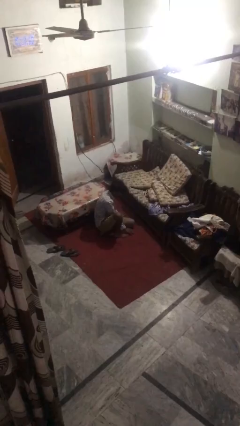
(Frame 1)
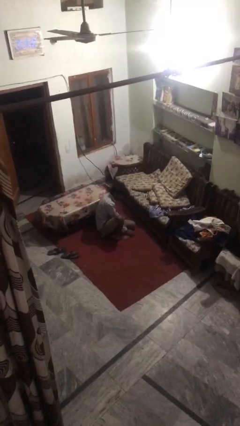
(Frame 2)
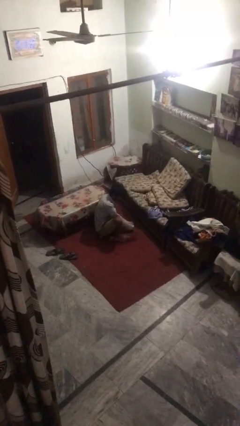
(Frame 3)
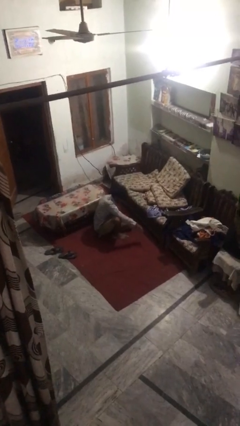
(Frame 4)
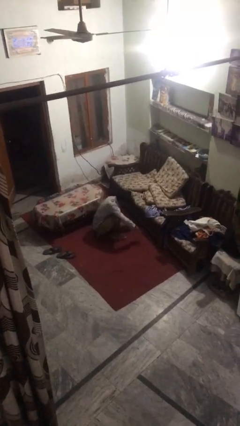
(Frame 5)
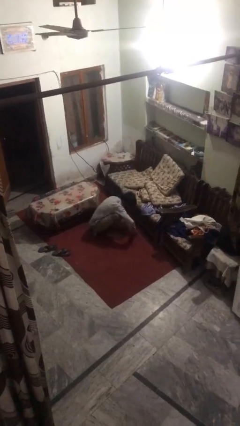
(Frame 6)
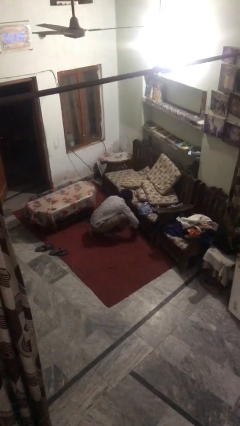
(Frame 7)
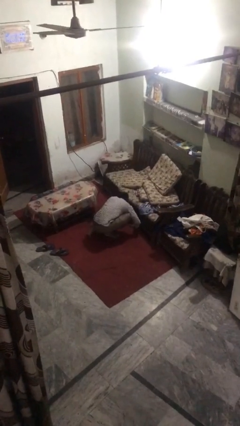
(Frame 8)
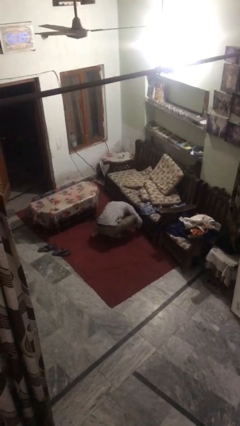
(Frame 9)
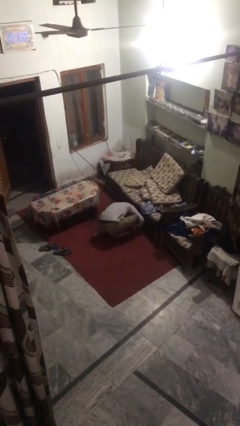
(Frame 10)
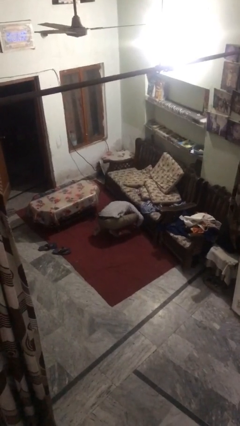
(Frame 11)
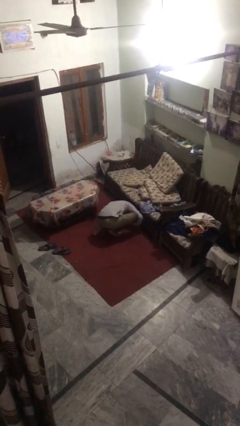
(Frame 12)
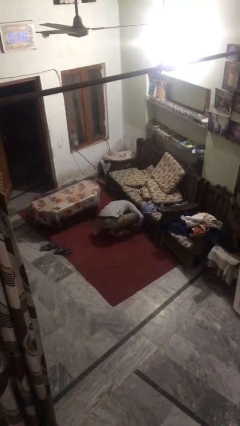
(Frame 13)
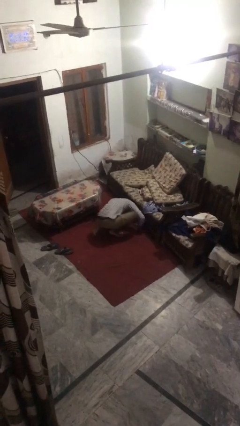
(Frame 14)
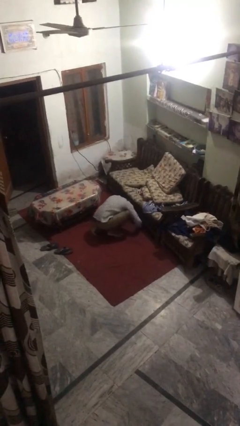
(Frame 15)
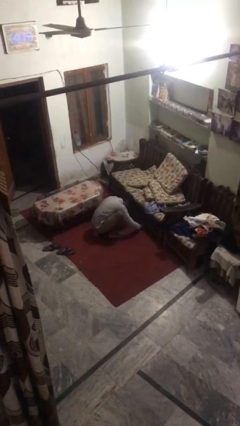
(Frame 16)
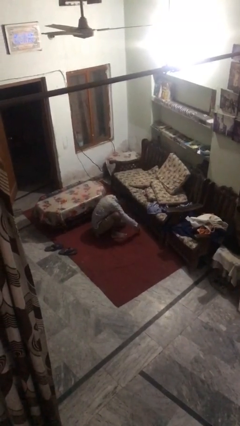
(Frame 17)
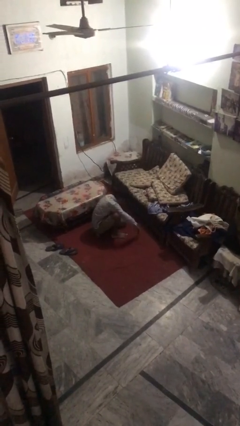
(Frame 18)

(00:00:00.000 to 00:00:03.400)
person searches under couch

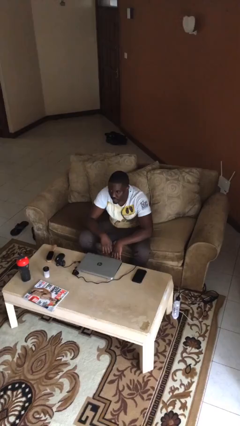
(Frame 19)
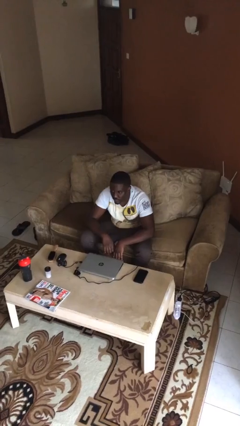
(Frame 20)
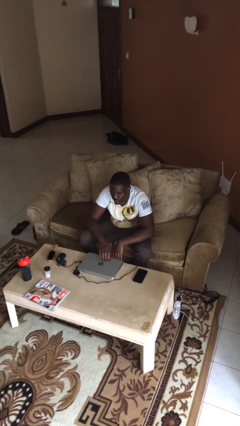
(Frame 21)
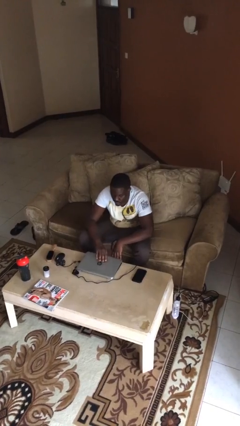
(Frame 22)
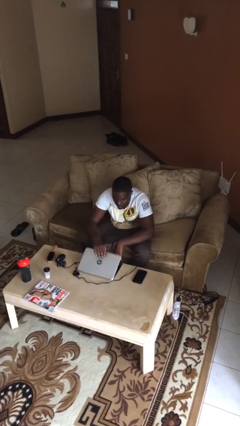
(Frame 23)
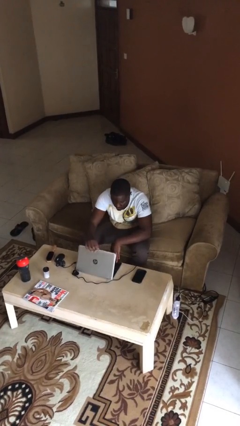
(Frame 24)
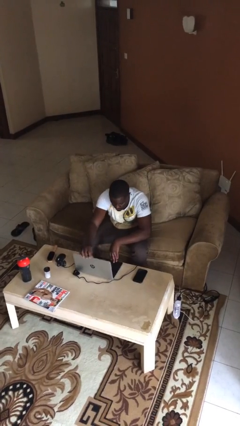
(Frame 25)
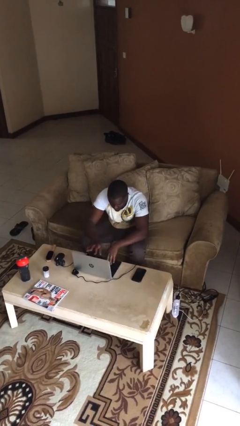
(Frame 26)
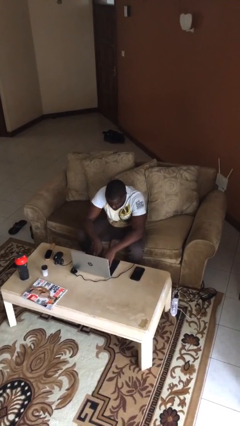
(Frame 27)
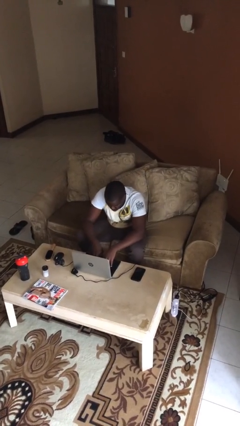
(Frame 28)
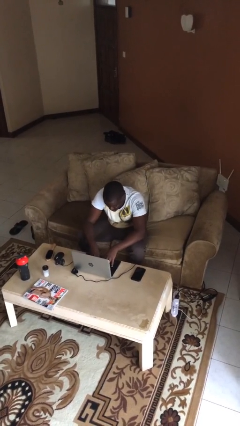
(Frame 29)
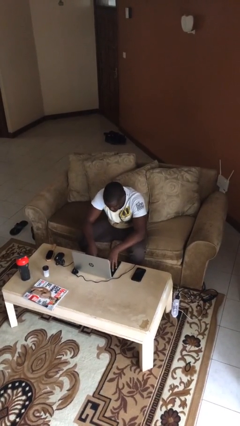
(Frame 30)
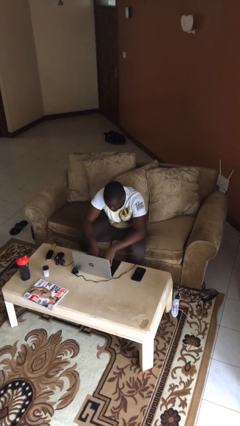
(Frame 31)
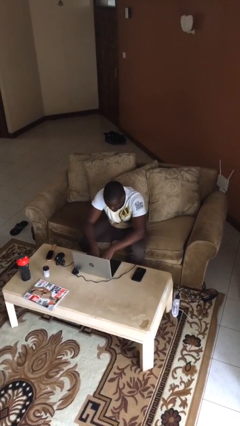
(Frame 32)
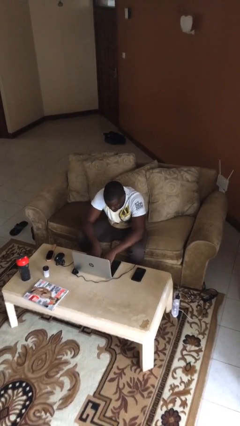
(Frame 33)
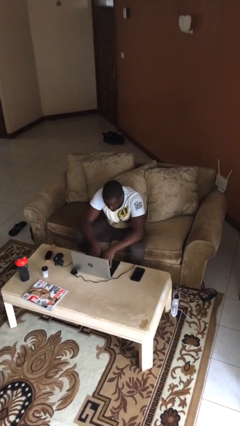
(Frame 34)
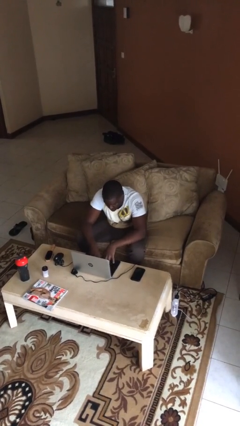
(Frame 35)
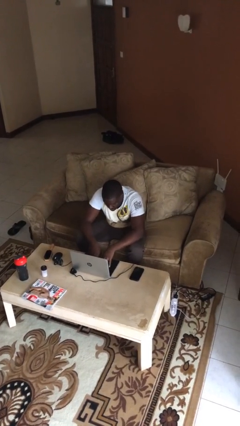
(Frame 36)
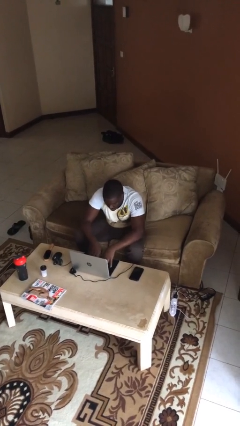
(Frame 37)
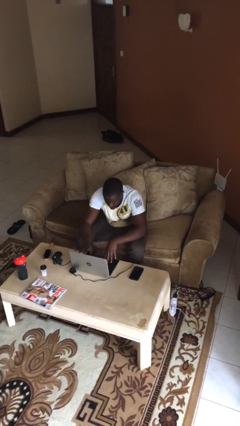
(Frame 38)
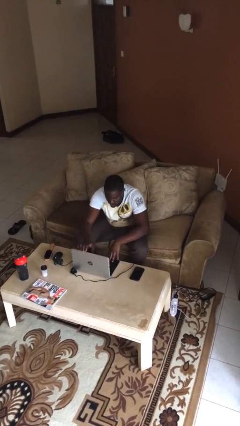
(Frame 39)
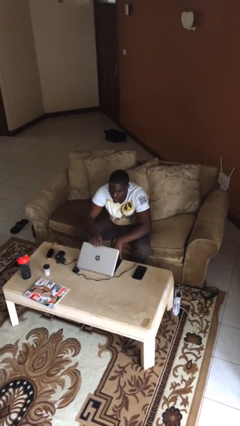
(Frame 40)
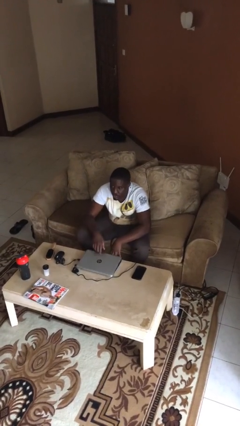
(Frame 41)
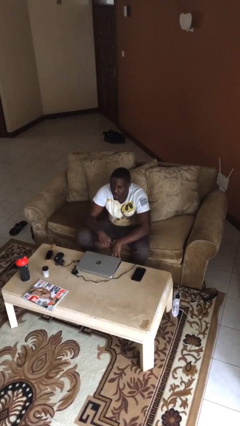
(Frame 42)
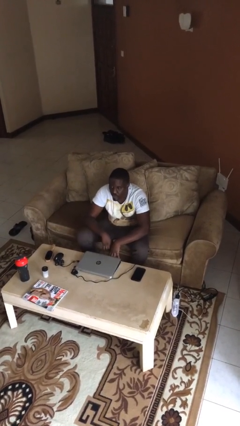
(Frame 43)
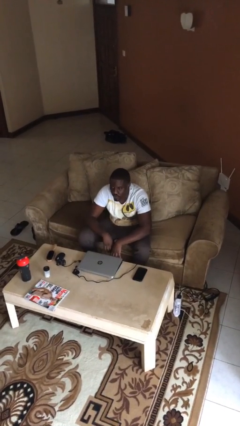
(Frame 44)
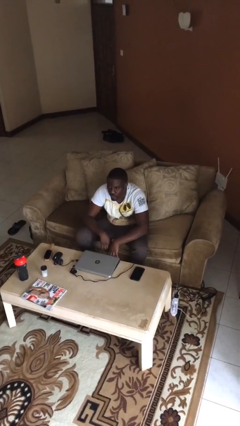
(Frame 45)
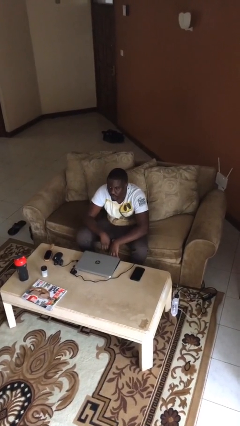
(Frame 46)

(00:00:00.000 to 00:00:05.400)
person interacts with laptop

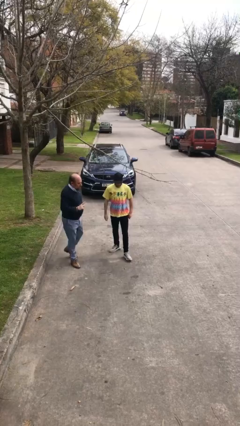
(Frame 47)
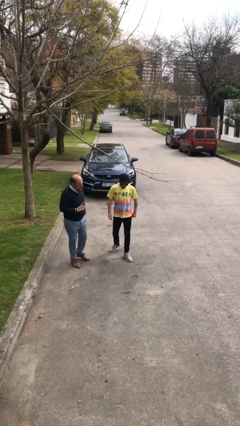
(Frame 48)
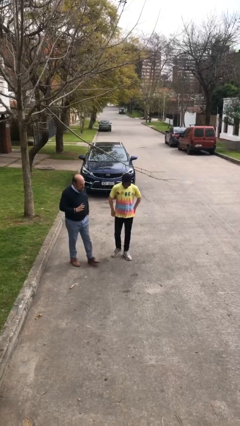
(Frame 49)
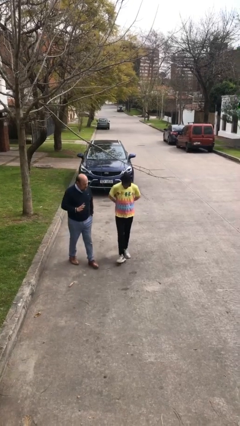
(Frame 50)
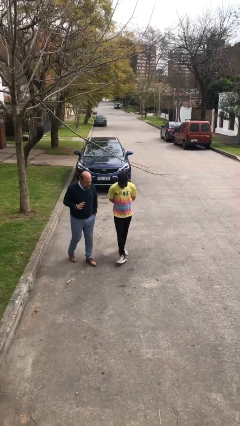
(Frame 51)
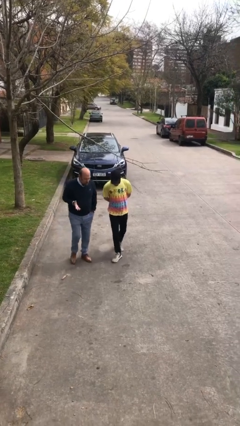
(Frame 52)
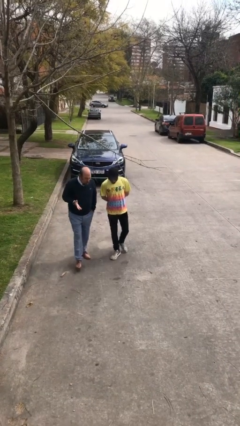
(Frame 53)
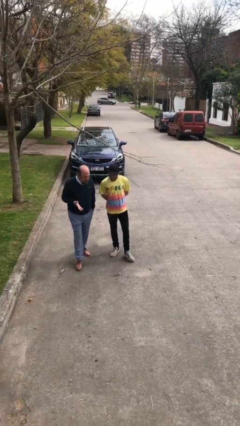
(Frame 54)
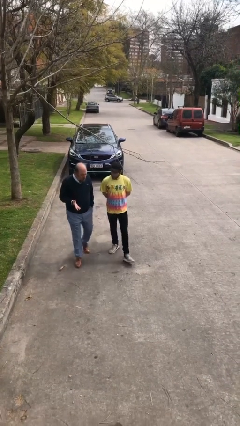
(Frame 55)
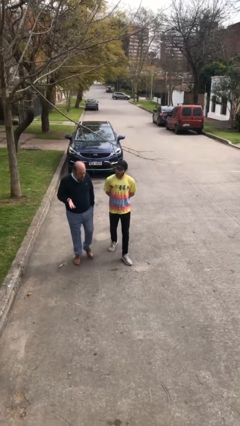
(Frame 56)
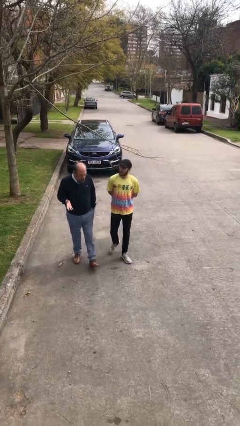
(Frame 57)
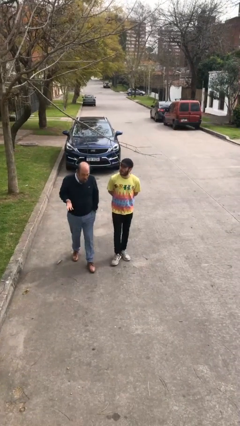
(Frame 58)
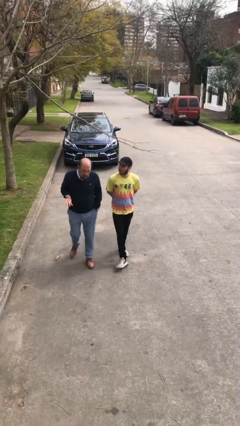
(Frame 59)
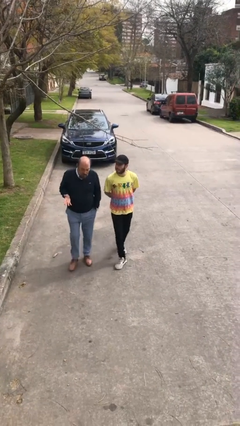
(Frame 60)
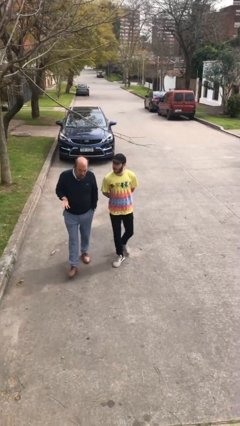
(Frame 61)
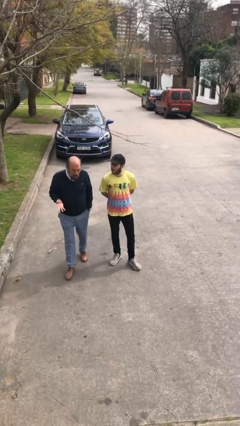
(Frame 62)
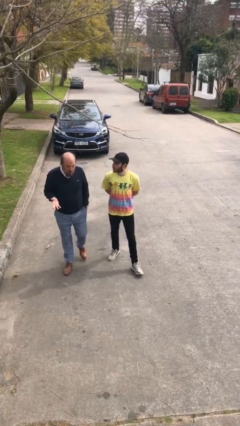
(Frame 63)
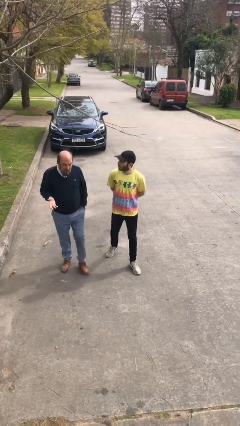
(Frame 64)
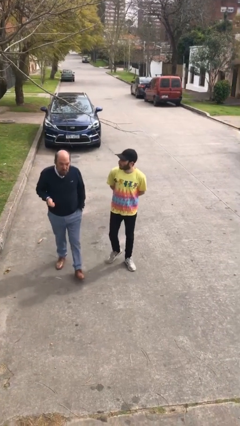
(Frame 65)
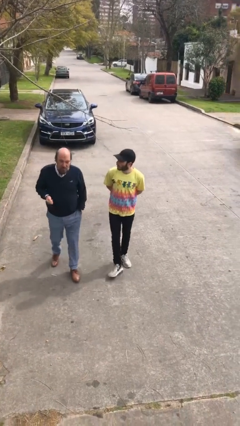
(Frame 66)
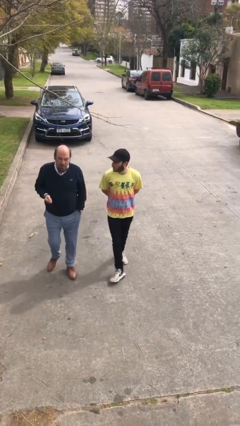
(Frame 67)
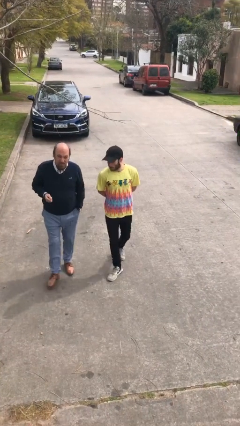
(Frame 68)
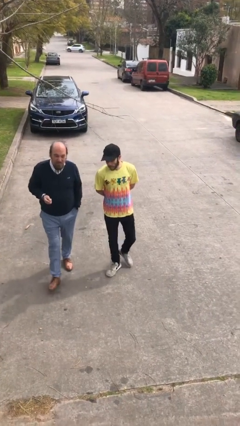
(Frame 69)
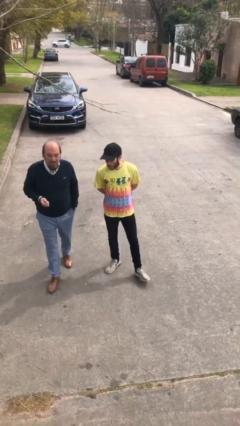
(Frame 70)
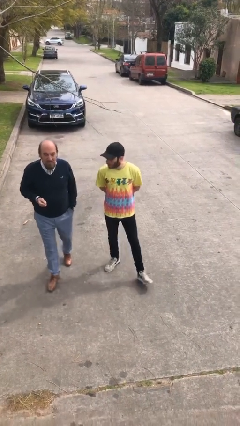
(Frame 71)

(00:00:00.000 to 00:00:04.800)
person talks to person

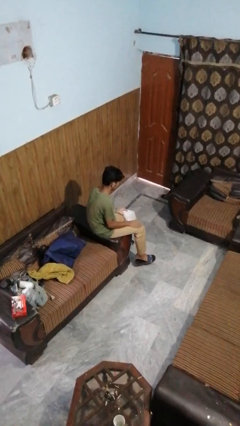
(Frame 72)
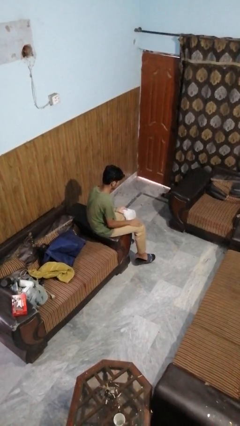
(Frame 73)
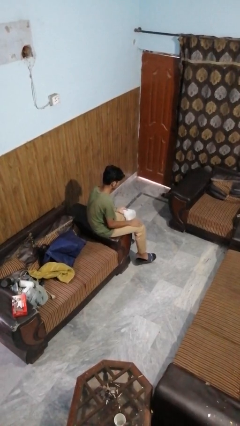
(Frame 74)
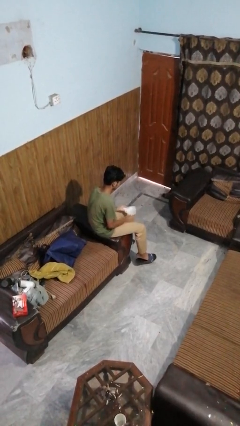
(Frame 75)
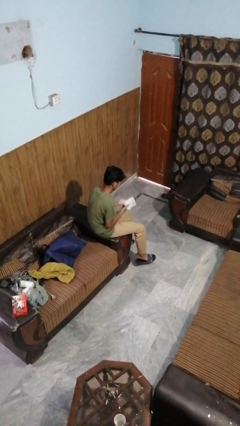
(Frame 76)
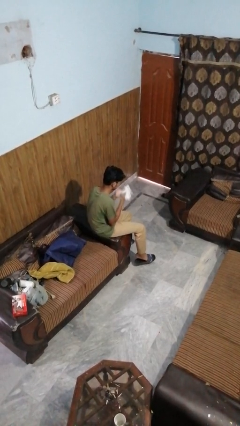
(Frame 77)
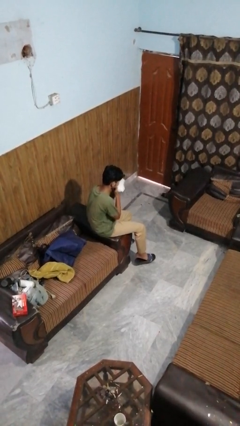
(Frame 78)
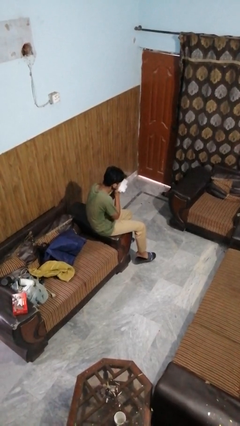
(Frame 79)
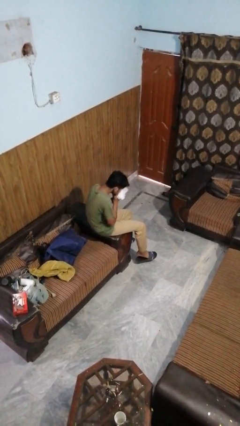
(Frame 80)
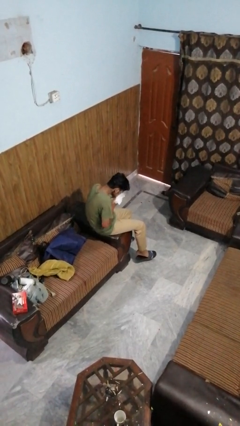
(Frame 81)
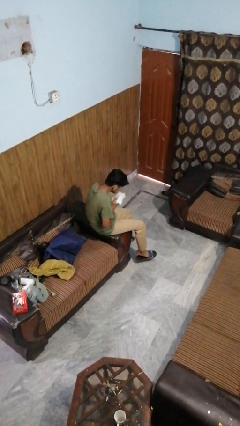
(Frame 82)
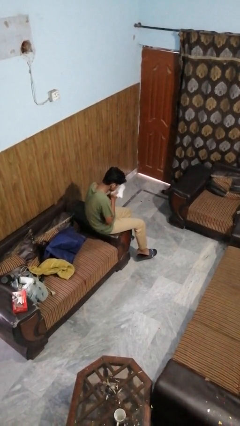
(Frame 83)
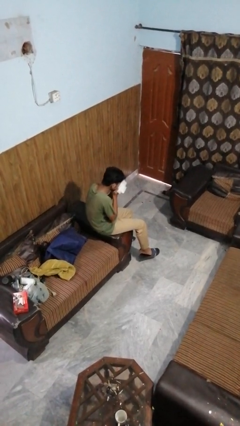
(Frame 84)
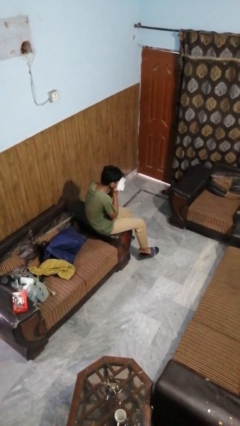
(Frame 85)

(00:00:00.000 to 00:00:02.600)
person blows nose

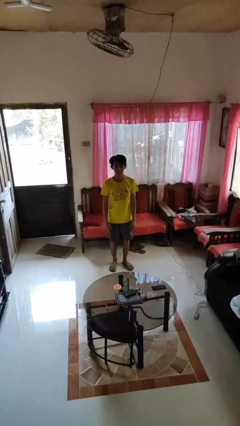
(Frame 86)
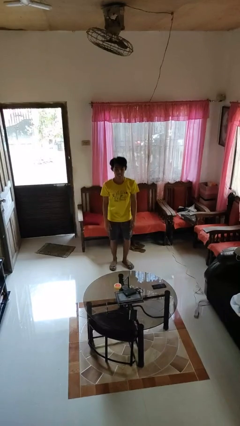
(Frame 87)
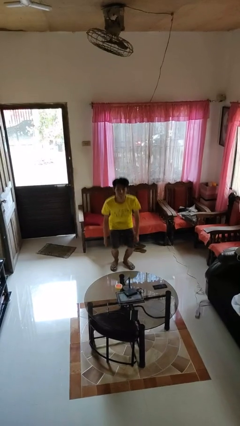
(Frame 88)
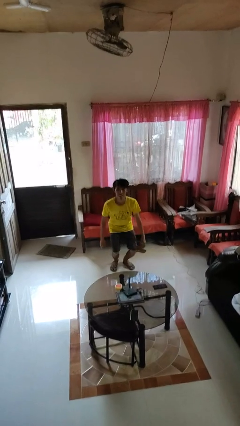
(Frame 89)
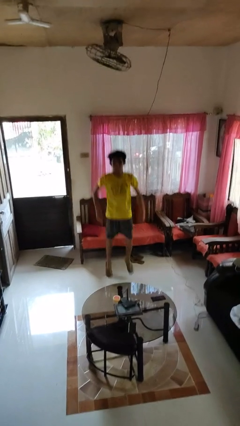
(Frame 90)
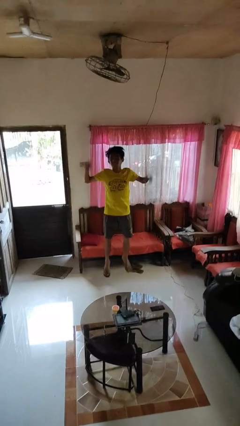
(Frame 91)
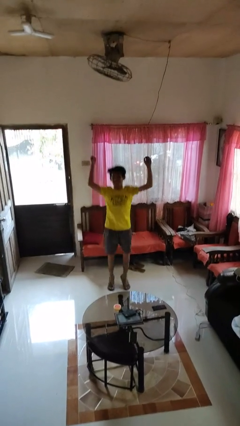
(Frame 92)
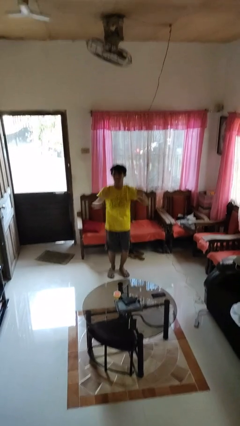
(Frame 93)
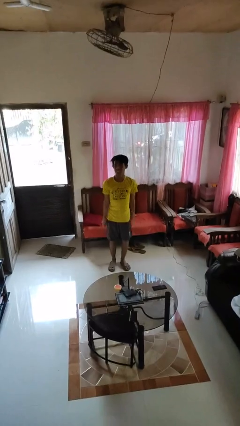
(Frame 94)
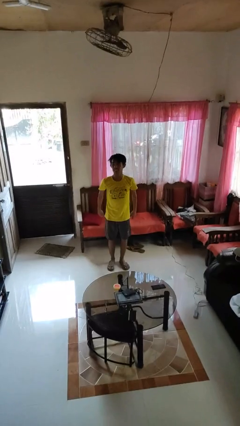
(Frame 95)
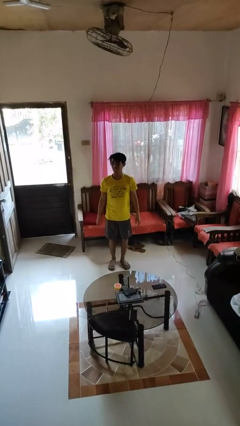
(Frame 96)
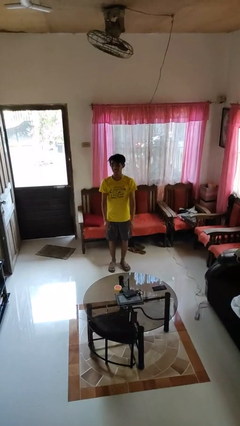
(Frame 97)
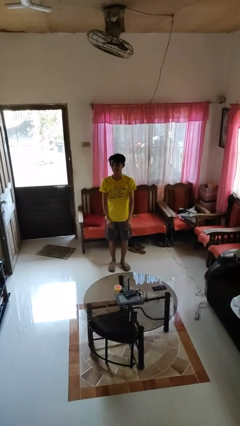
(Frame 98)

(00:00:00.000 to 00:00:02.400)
person jumps
